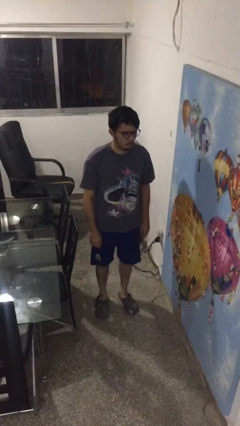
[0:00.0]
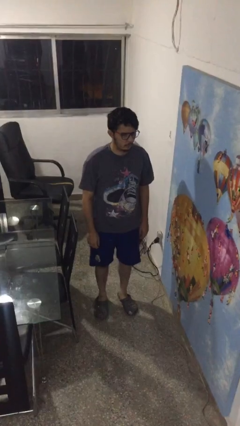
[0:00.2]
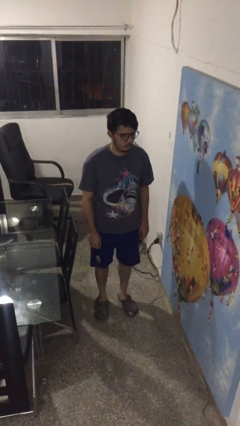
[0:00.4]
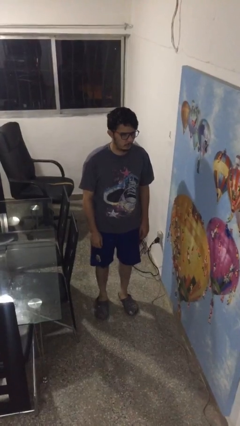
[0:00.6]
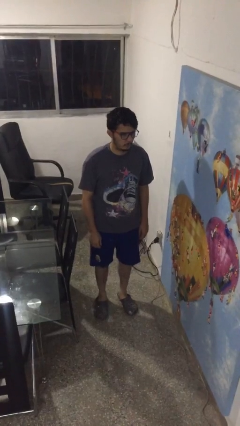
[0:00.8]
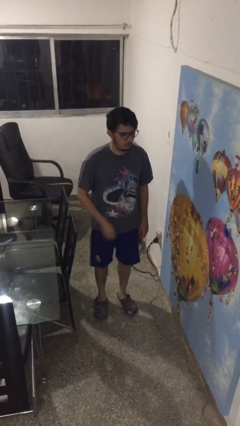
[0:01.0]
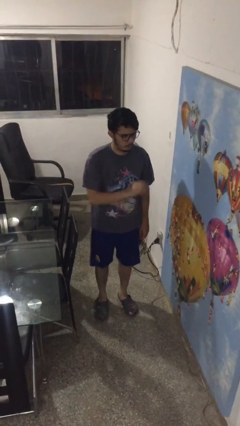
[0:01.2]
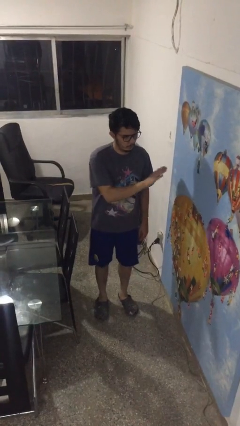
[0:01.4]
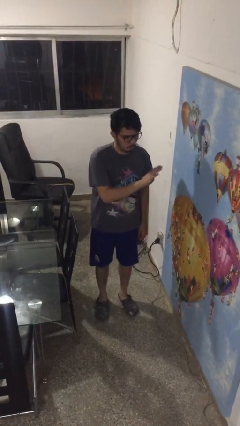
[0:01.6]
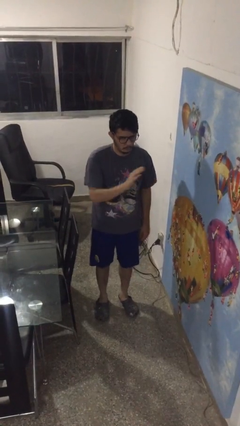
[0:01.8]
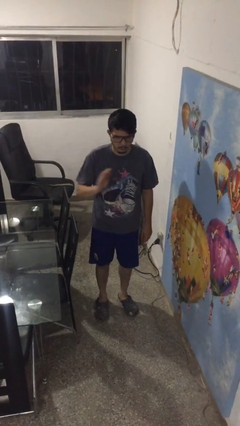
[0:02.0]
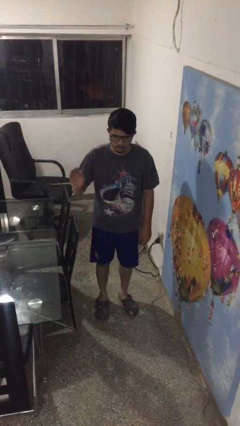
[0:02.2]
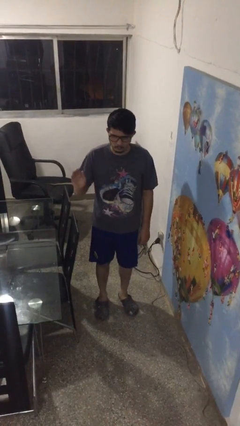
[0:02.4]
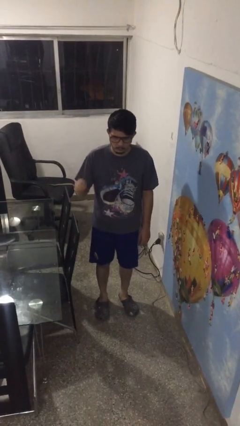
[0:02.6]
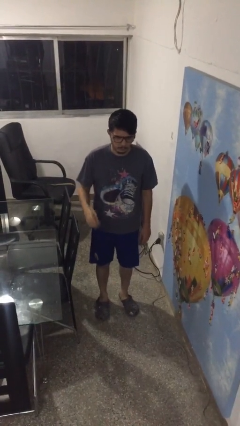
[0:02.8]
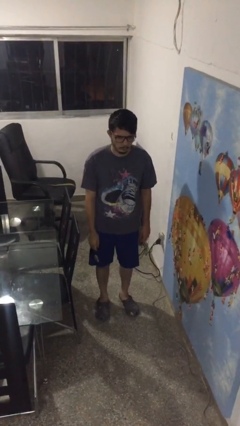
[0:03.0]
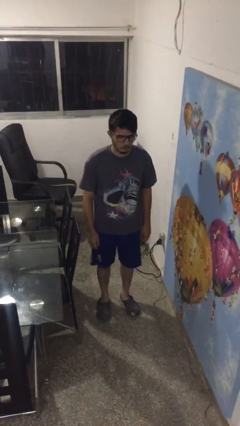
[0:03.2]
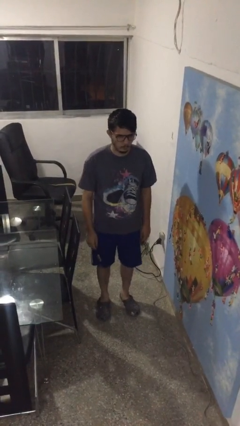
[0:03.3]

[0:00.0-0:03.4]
person gestures swipe right

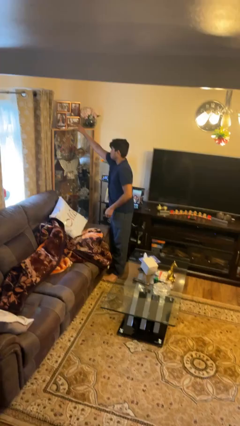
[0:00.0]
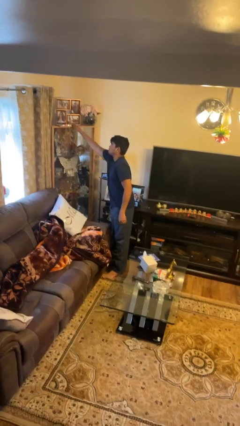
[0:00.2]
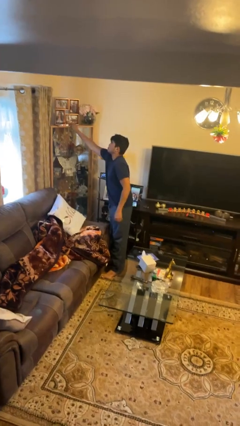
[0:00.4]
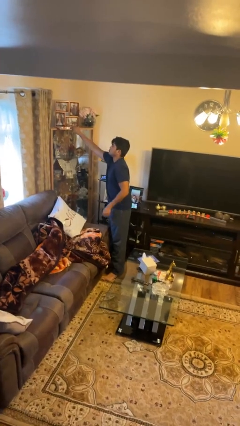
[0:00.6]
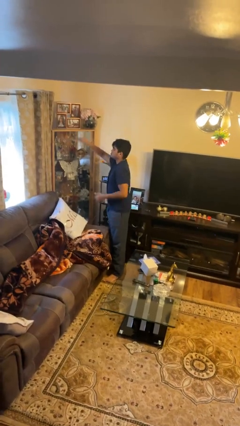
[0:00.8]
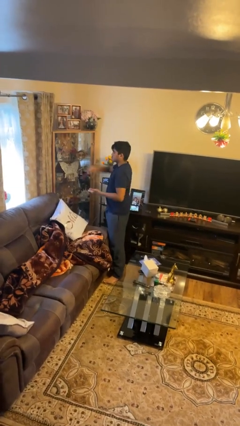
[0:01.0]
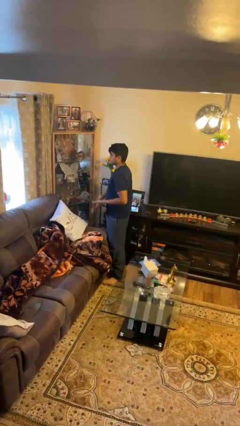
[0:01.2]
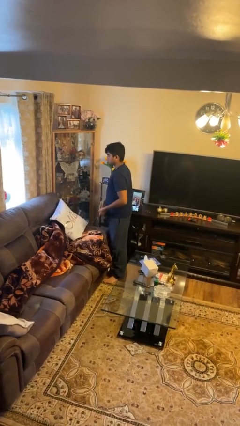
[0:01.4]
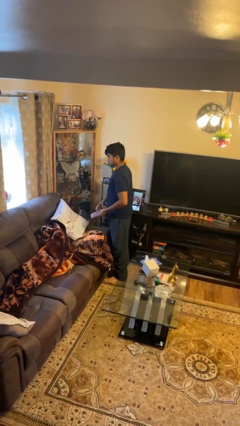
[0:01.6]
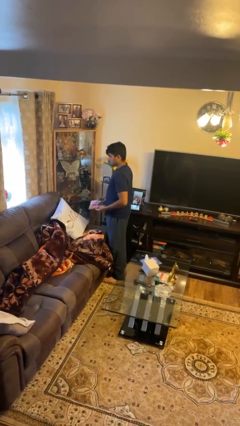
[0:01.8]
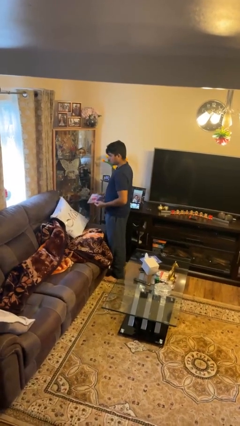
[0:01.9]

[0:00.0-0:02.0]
person picks up object from shelf

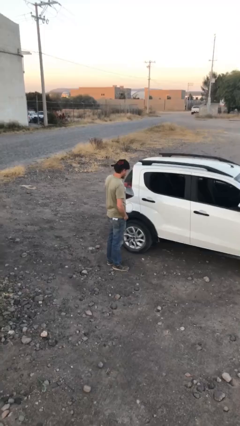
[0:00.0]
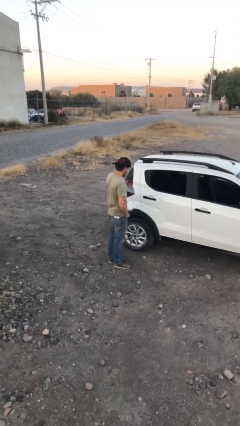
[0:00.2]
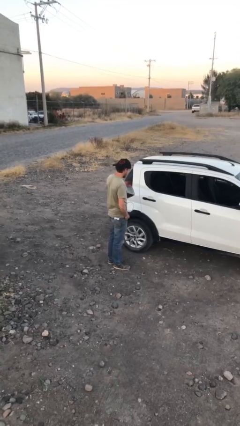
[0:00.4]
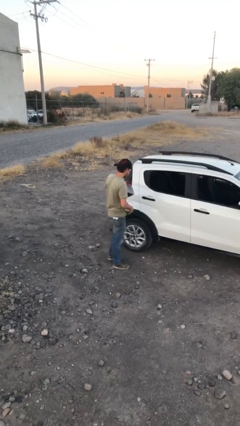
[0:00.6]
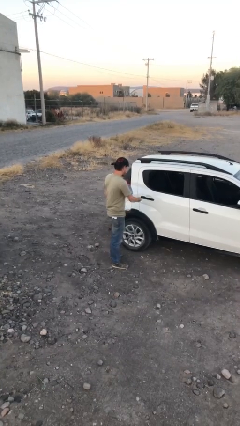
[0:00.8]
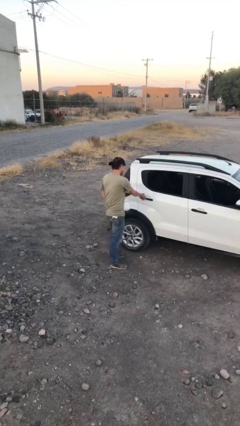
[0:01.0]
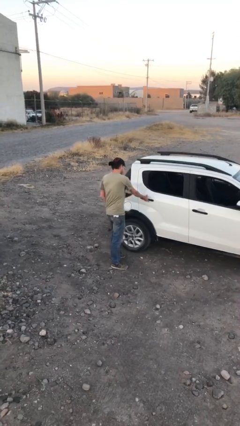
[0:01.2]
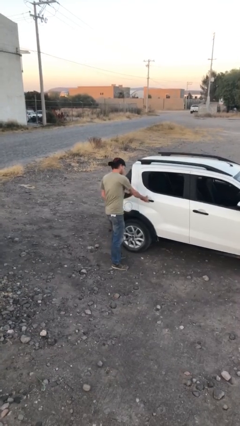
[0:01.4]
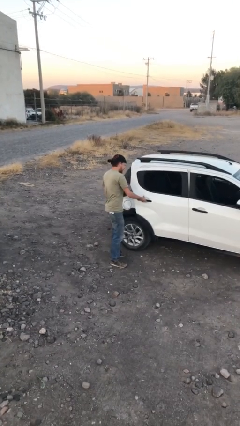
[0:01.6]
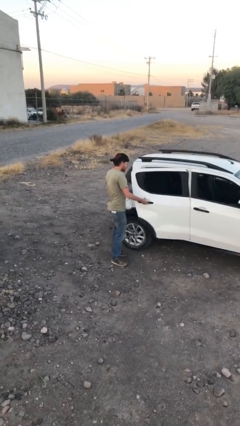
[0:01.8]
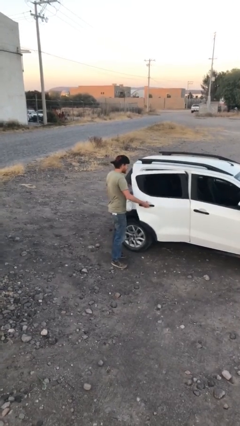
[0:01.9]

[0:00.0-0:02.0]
person opens car door

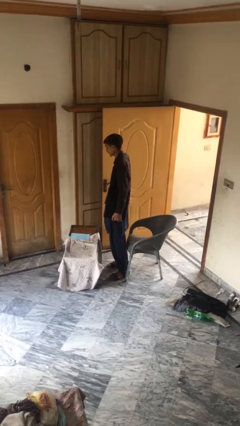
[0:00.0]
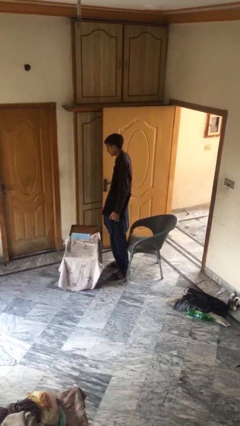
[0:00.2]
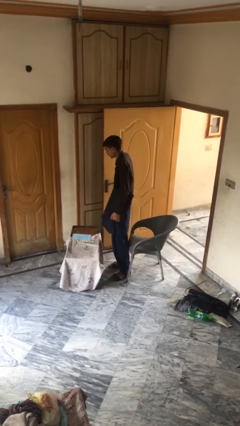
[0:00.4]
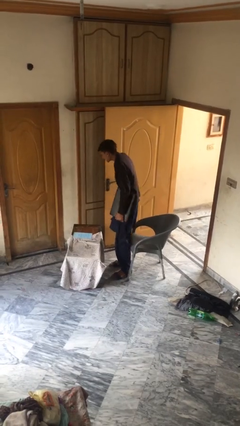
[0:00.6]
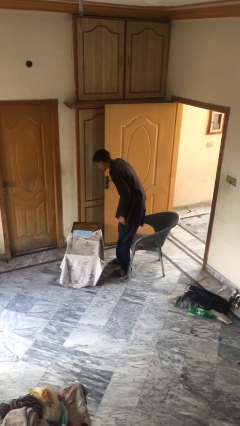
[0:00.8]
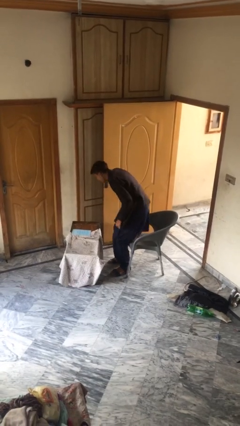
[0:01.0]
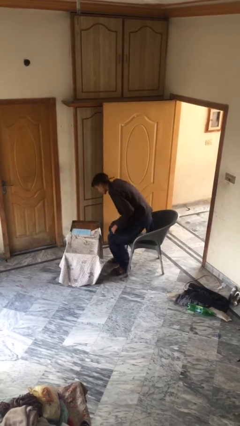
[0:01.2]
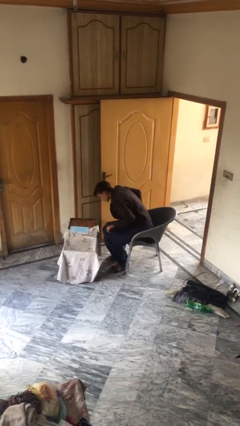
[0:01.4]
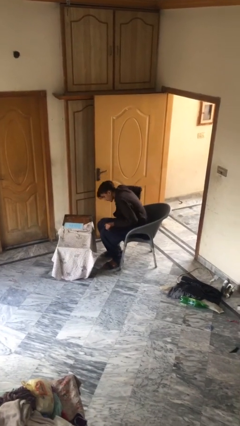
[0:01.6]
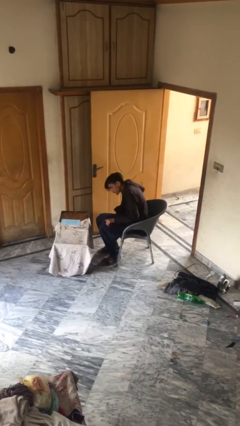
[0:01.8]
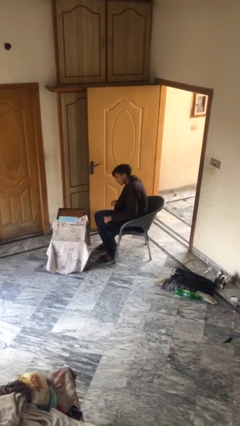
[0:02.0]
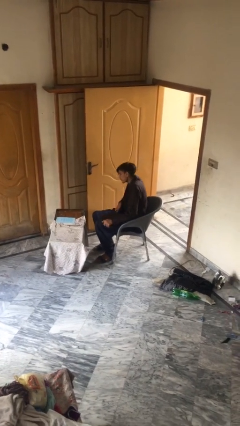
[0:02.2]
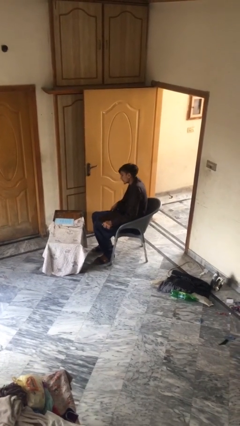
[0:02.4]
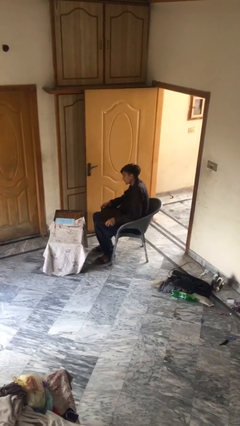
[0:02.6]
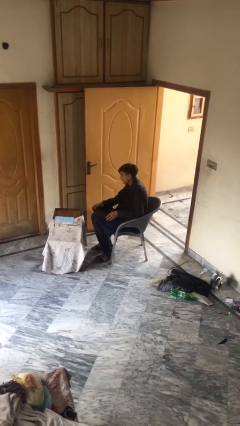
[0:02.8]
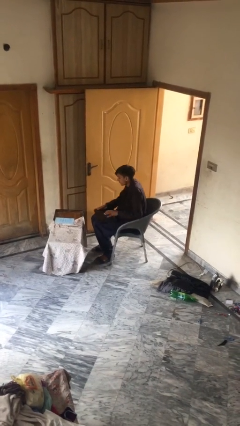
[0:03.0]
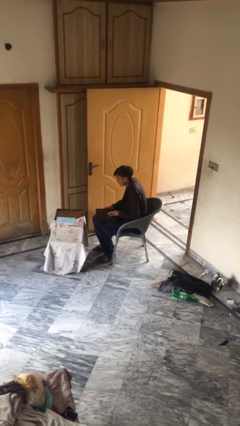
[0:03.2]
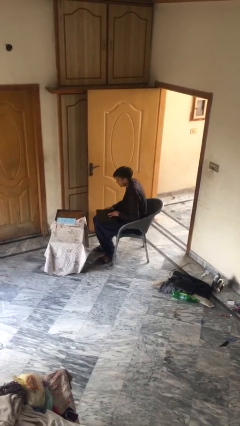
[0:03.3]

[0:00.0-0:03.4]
person sits down

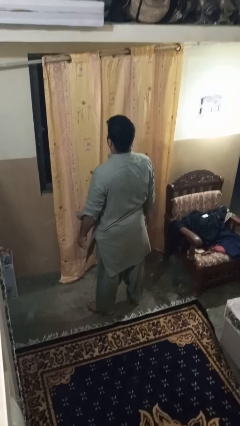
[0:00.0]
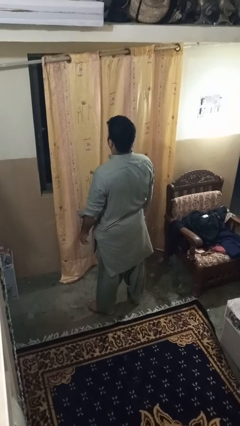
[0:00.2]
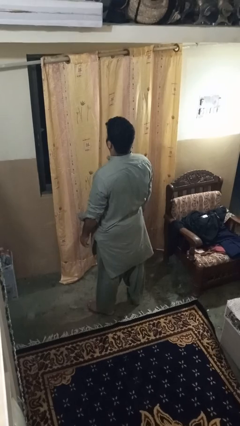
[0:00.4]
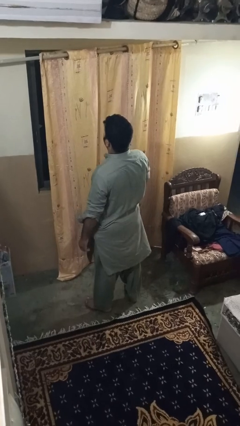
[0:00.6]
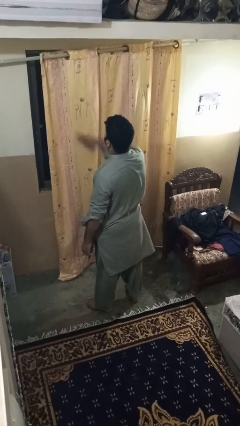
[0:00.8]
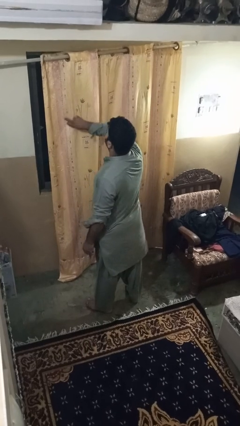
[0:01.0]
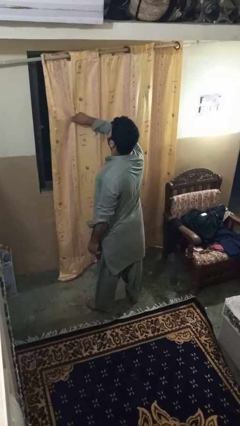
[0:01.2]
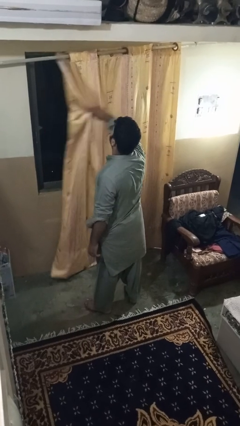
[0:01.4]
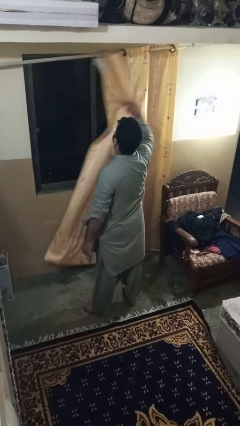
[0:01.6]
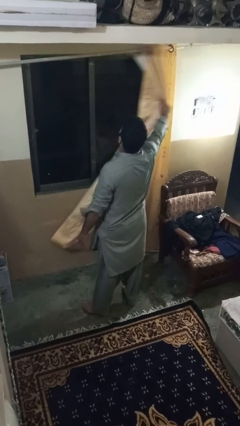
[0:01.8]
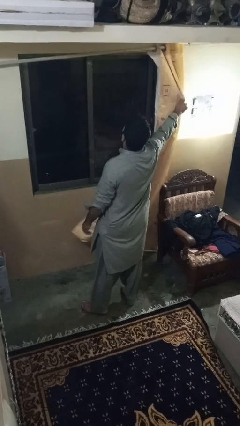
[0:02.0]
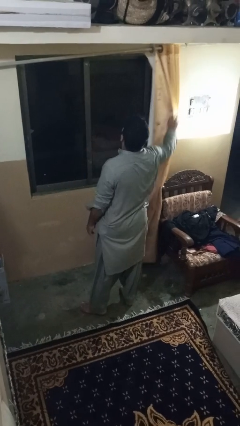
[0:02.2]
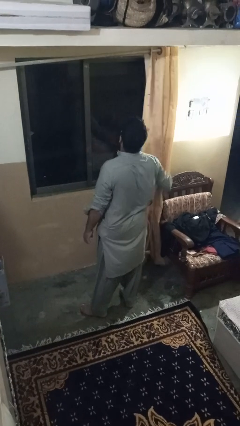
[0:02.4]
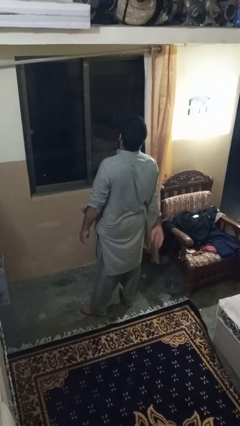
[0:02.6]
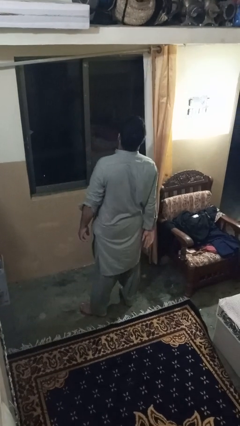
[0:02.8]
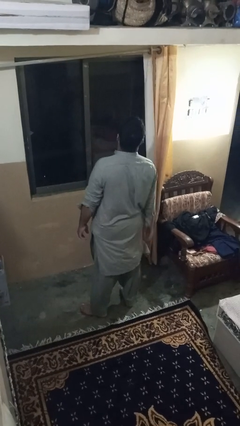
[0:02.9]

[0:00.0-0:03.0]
person opens curtains

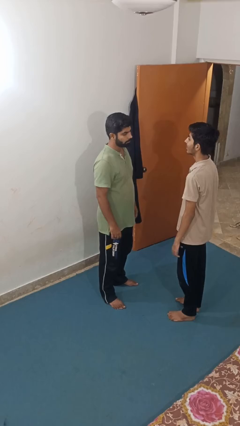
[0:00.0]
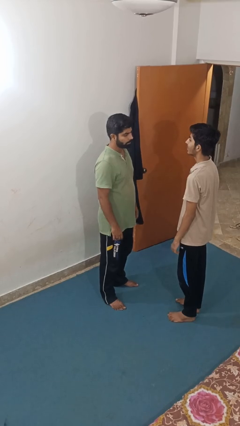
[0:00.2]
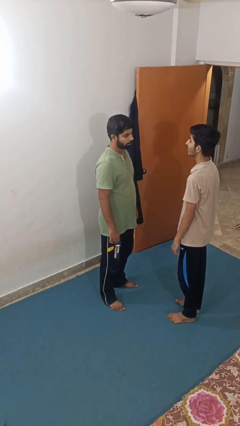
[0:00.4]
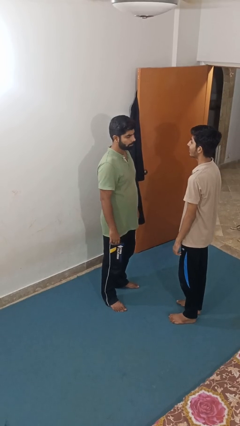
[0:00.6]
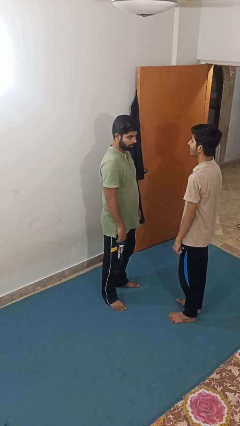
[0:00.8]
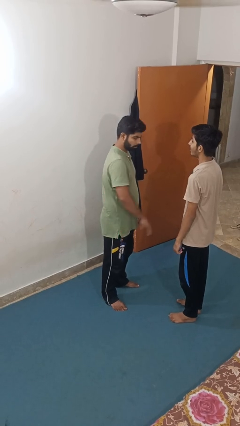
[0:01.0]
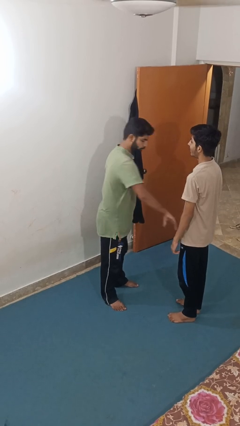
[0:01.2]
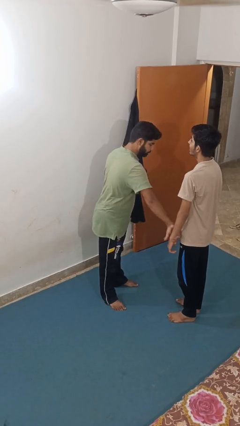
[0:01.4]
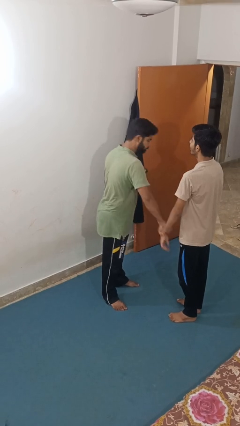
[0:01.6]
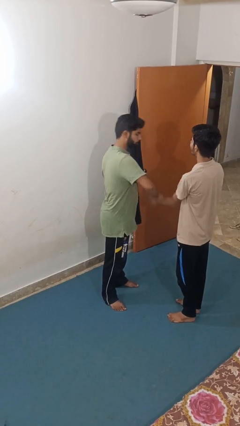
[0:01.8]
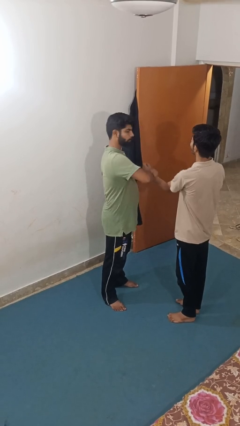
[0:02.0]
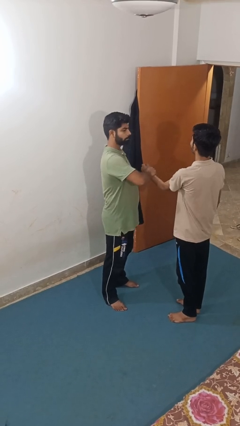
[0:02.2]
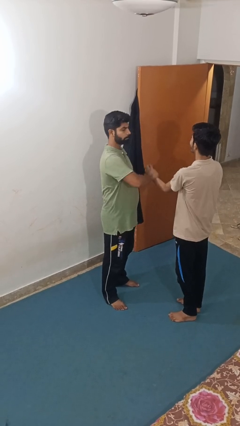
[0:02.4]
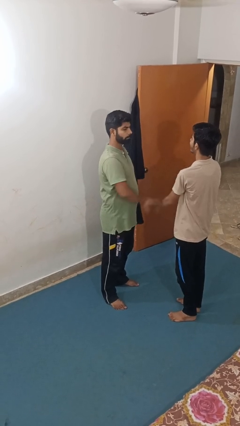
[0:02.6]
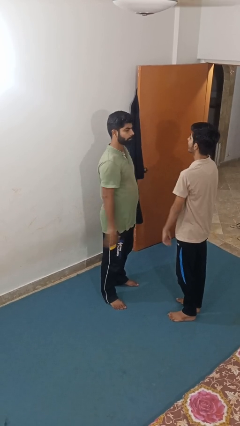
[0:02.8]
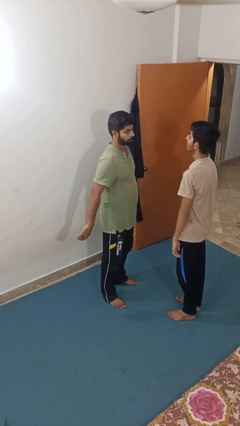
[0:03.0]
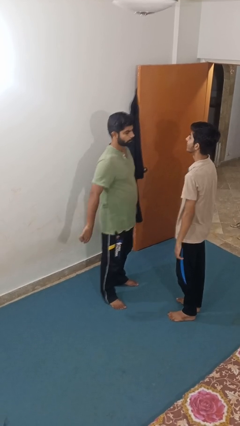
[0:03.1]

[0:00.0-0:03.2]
person grabs person by forearm

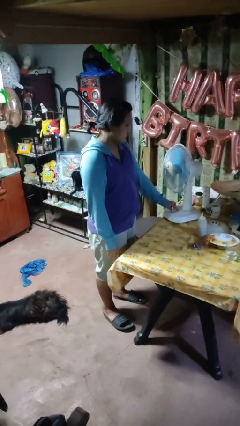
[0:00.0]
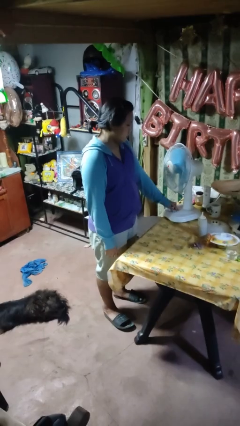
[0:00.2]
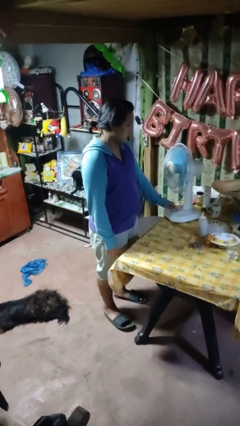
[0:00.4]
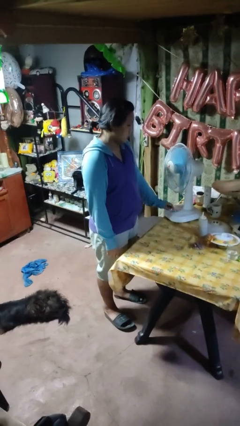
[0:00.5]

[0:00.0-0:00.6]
person turns off fan
